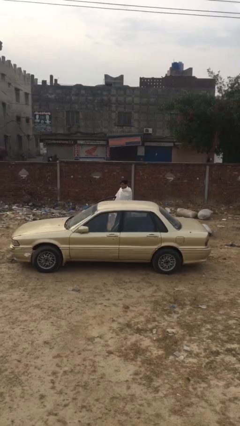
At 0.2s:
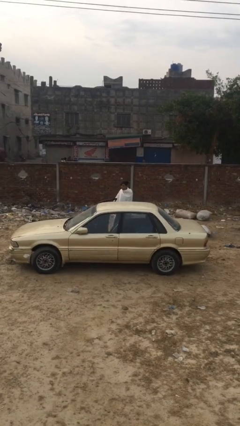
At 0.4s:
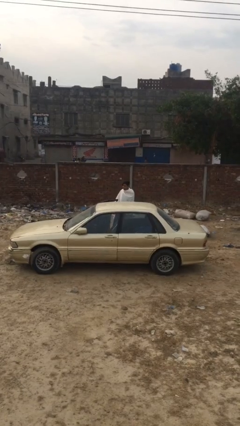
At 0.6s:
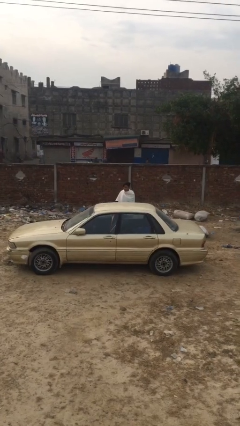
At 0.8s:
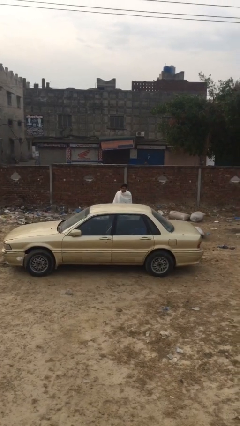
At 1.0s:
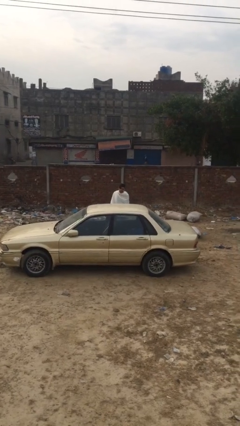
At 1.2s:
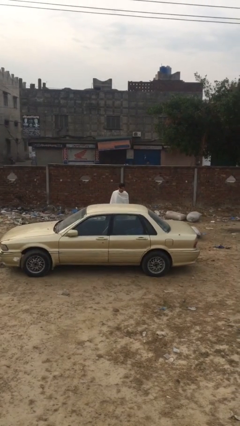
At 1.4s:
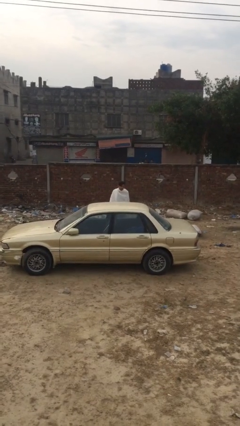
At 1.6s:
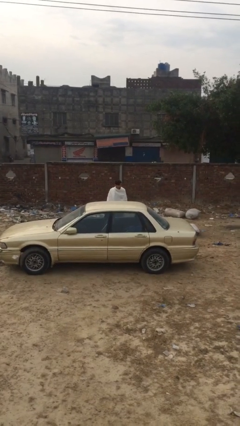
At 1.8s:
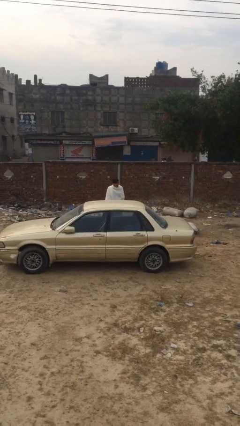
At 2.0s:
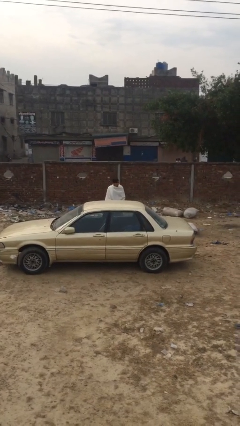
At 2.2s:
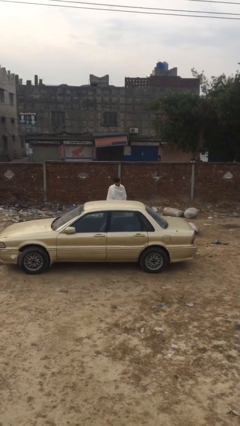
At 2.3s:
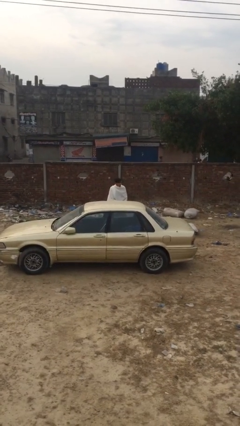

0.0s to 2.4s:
person closes car door

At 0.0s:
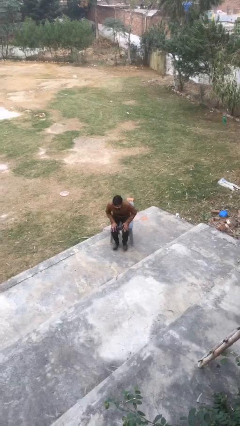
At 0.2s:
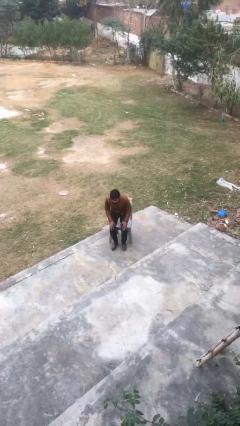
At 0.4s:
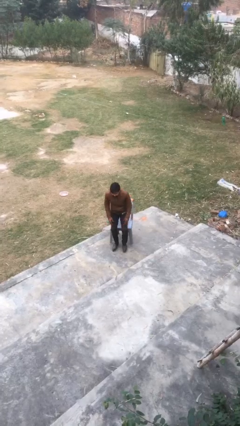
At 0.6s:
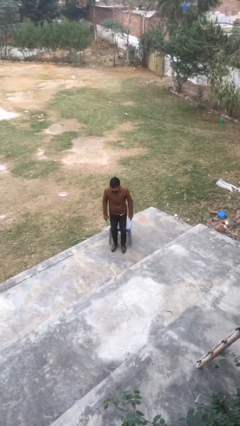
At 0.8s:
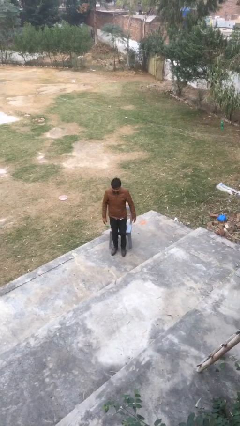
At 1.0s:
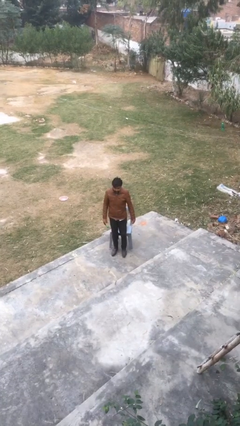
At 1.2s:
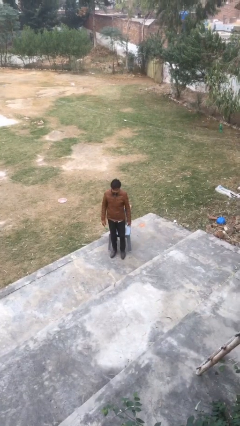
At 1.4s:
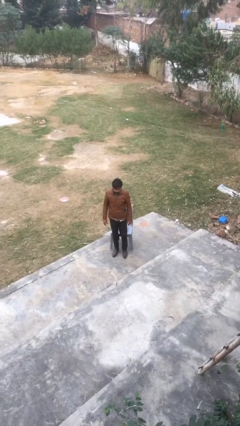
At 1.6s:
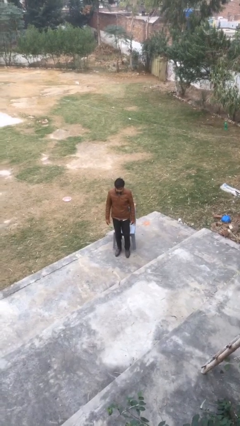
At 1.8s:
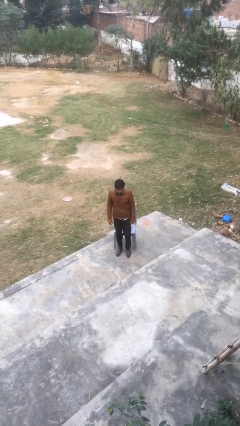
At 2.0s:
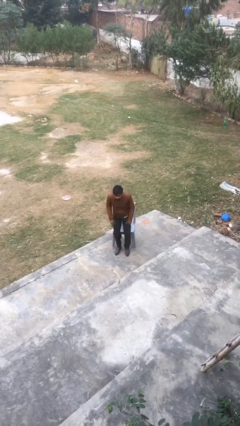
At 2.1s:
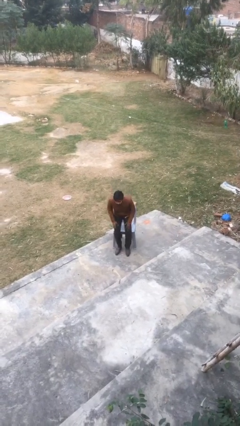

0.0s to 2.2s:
person stands up

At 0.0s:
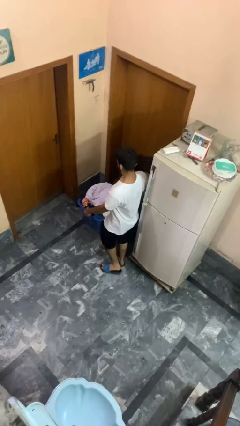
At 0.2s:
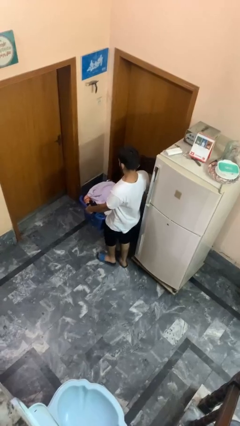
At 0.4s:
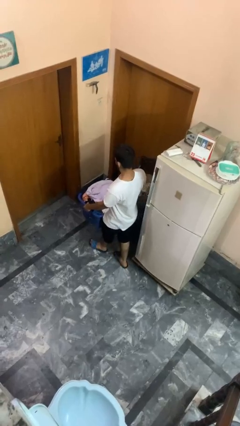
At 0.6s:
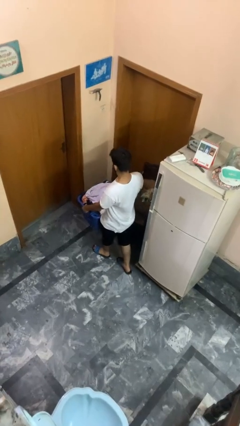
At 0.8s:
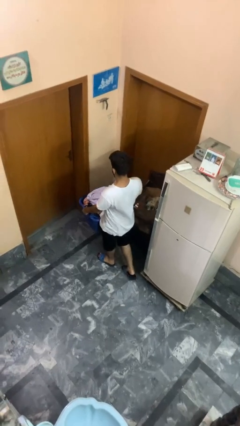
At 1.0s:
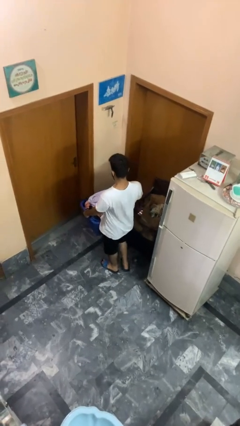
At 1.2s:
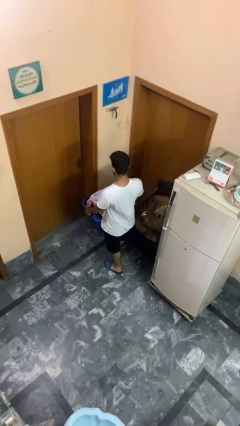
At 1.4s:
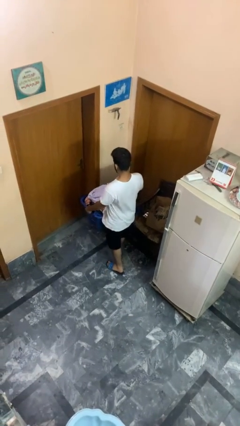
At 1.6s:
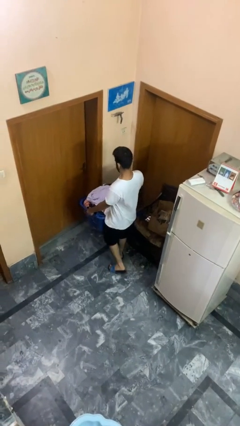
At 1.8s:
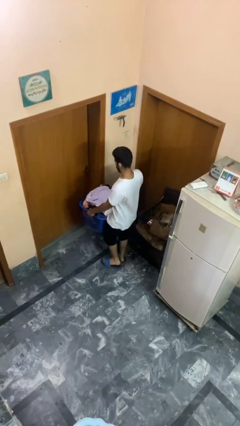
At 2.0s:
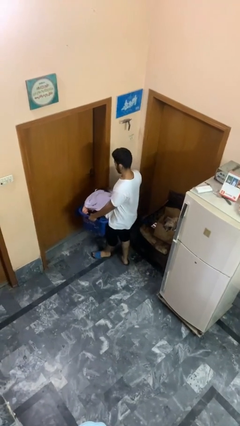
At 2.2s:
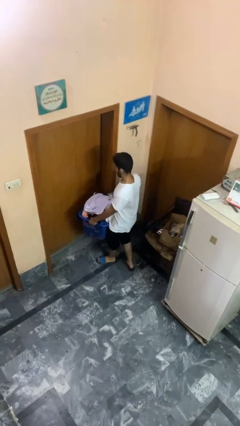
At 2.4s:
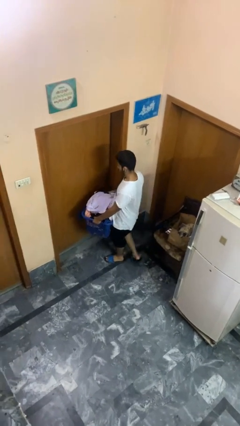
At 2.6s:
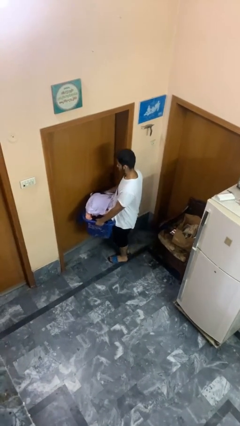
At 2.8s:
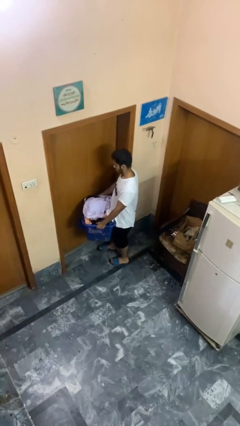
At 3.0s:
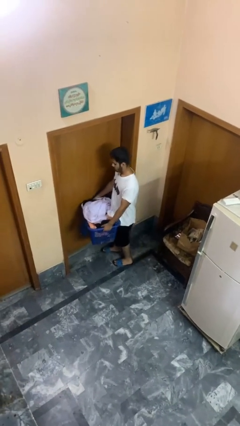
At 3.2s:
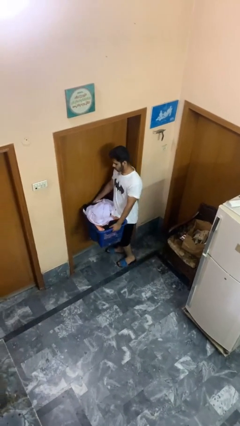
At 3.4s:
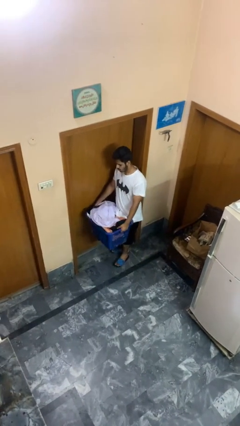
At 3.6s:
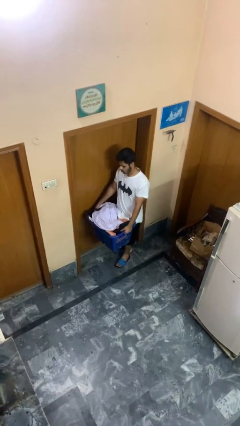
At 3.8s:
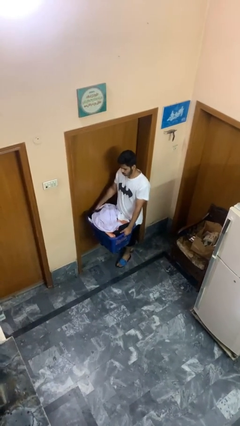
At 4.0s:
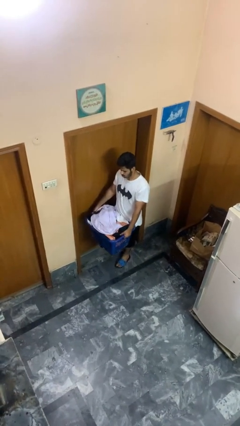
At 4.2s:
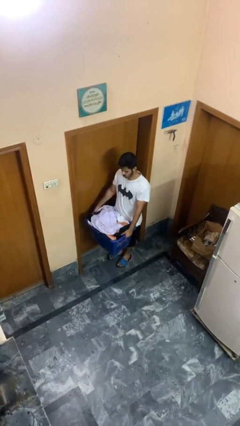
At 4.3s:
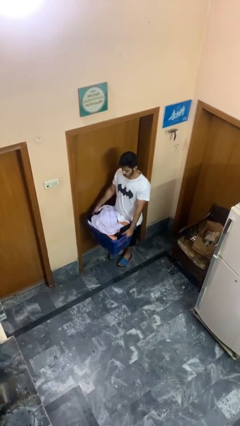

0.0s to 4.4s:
person carries laundry basket

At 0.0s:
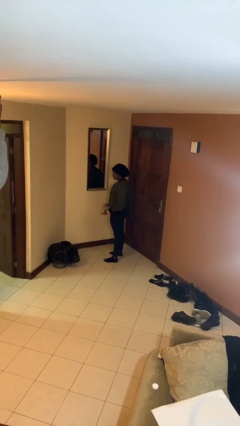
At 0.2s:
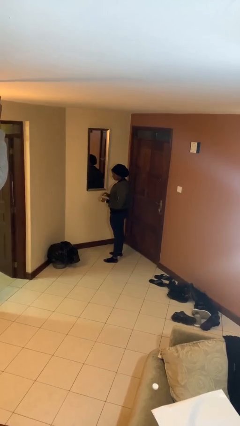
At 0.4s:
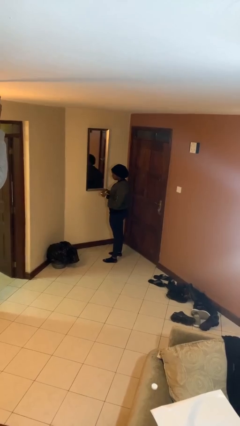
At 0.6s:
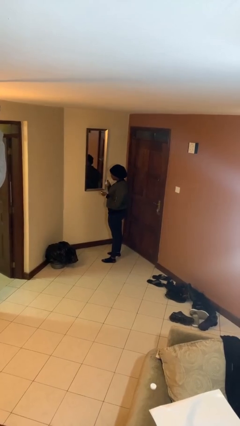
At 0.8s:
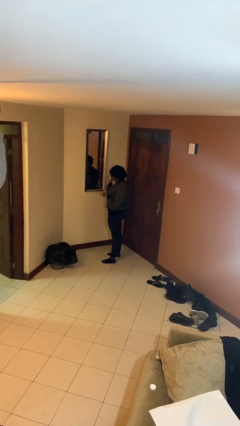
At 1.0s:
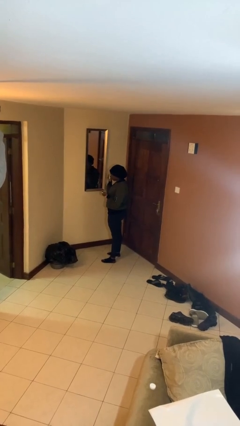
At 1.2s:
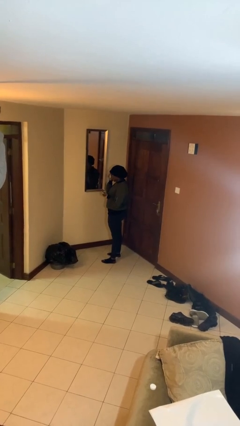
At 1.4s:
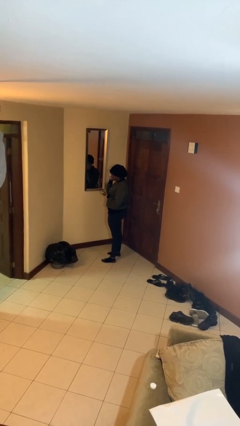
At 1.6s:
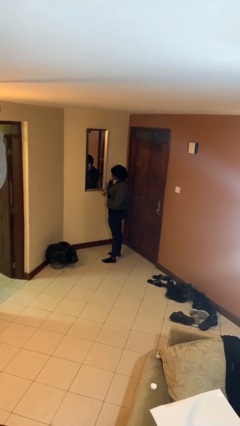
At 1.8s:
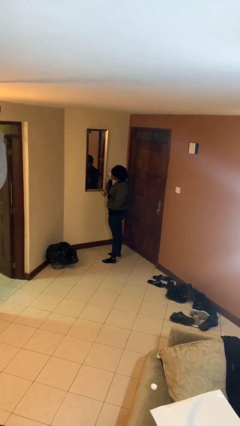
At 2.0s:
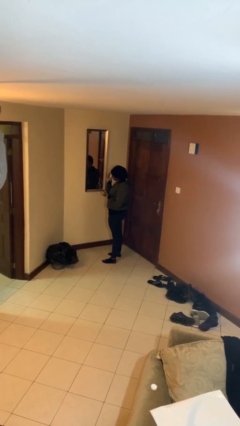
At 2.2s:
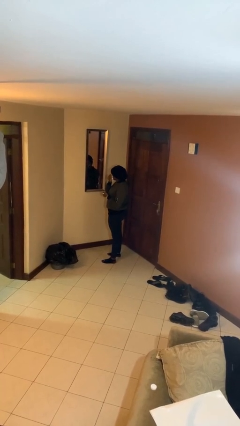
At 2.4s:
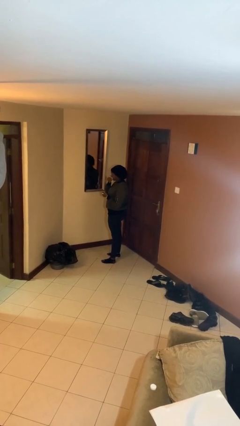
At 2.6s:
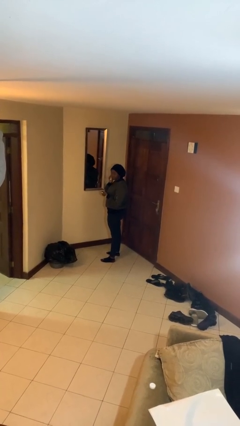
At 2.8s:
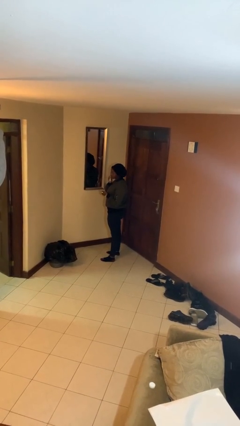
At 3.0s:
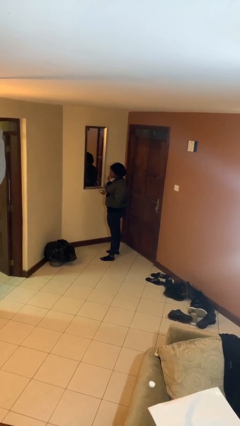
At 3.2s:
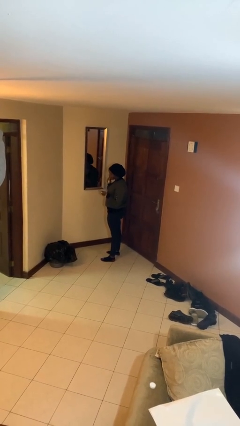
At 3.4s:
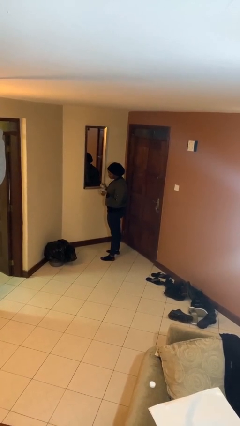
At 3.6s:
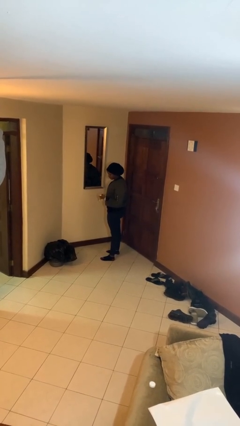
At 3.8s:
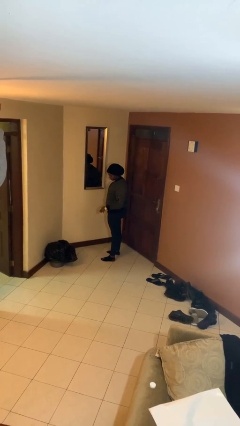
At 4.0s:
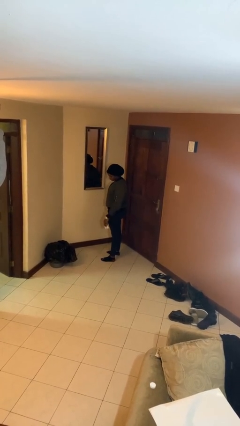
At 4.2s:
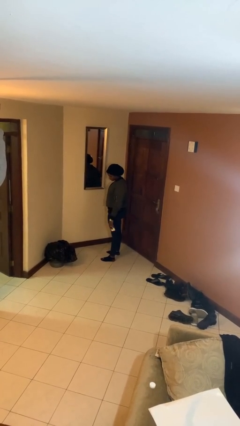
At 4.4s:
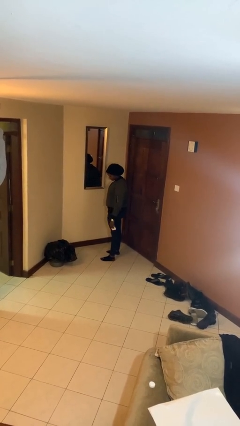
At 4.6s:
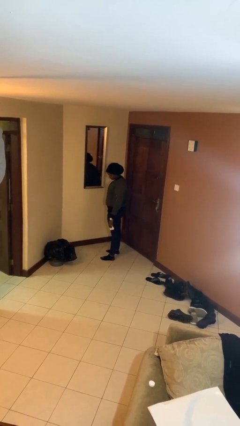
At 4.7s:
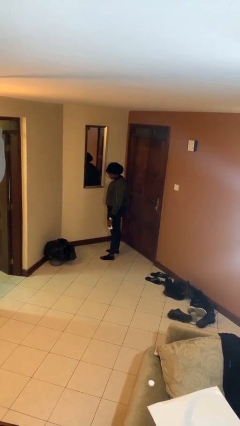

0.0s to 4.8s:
person applies foundation makeup

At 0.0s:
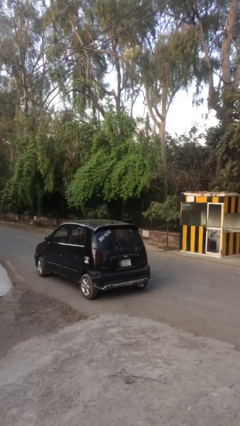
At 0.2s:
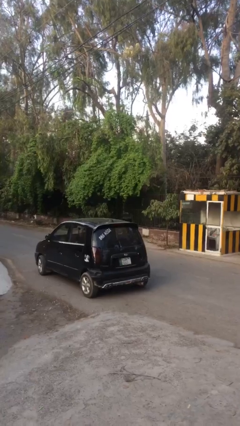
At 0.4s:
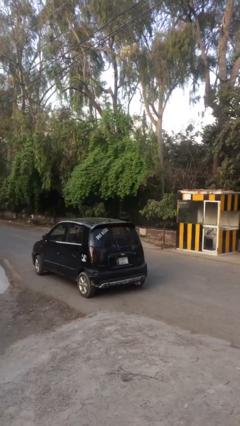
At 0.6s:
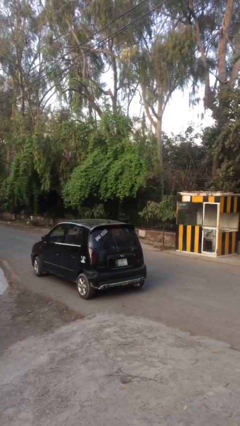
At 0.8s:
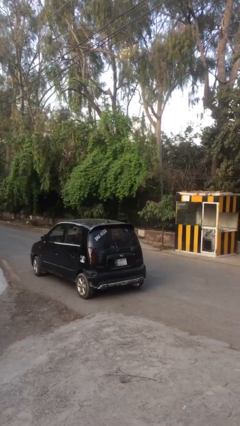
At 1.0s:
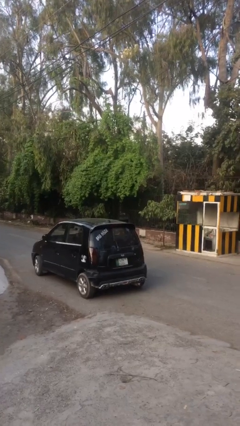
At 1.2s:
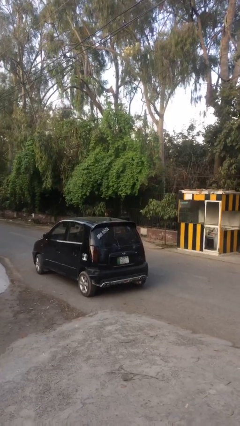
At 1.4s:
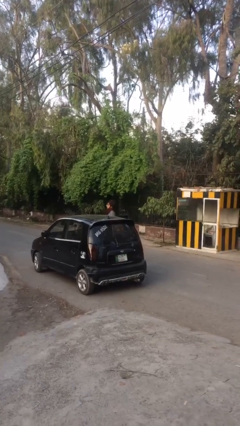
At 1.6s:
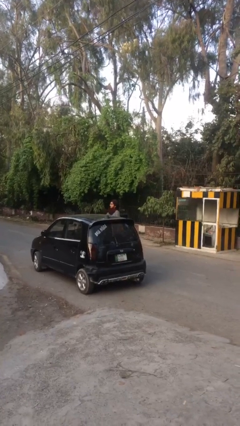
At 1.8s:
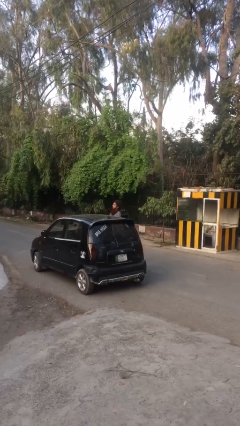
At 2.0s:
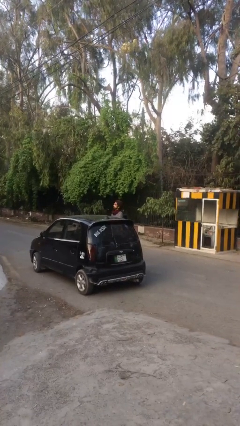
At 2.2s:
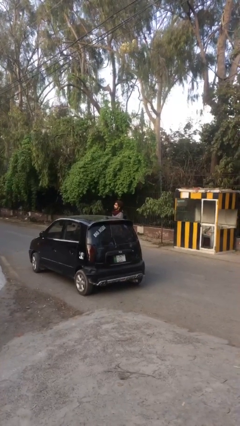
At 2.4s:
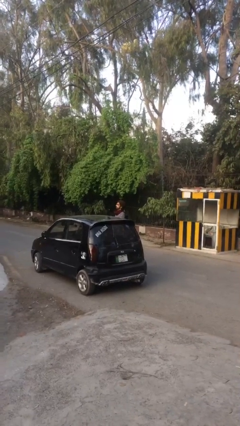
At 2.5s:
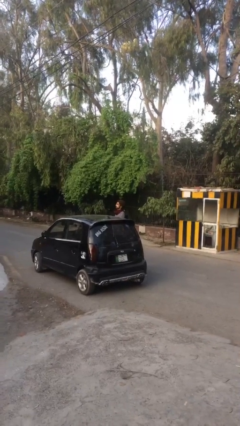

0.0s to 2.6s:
person exits car

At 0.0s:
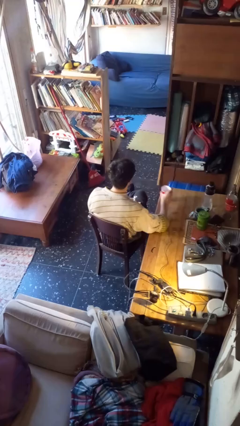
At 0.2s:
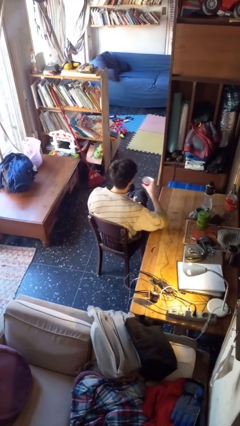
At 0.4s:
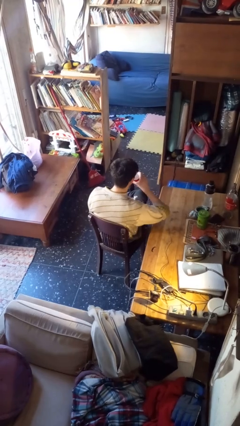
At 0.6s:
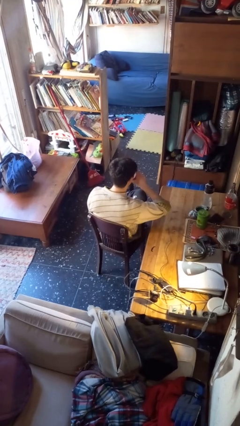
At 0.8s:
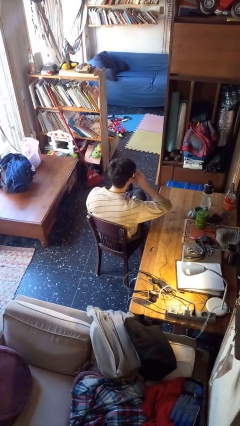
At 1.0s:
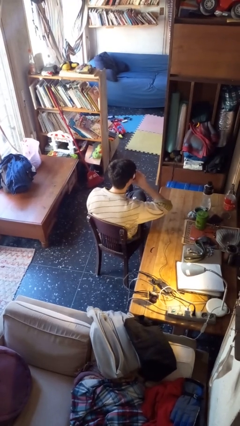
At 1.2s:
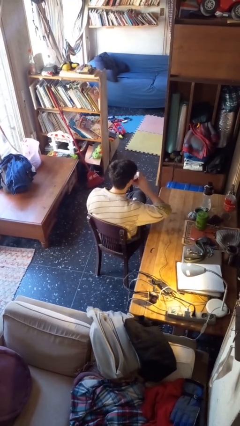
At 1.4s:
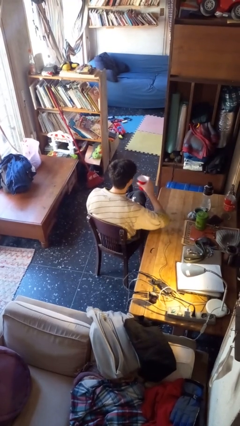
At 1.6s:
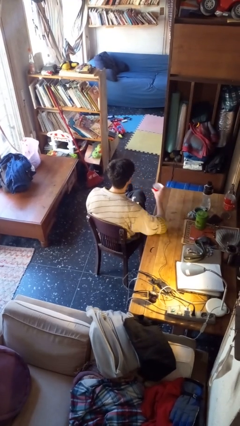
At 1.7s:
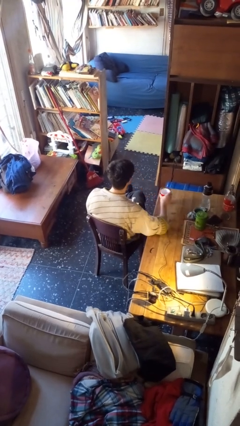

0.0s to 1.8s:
person drinks from cup
